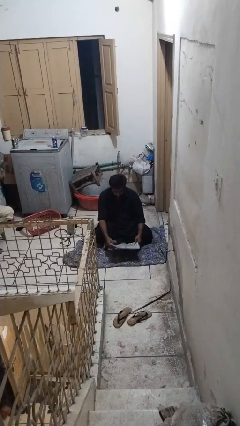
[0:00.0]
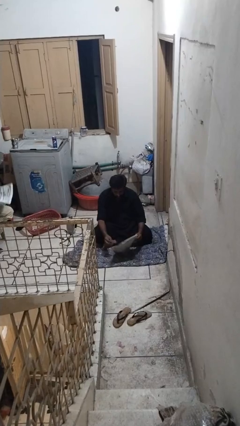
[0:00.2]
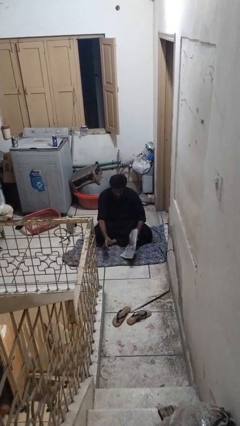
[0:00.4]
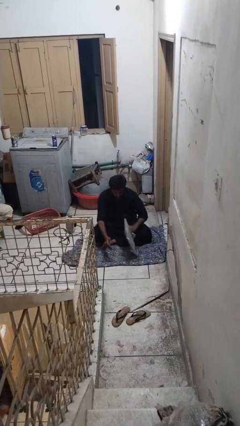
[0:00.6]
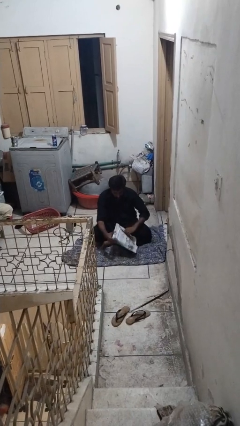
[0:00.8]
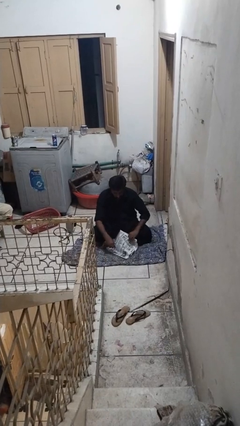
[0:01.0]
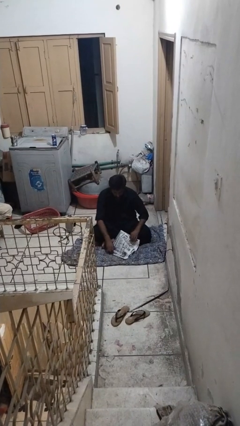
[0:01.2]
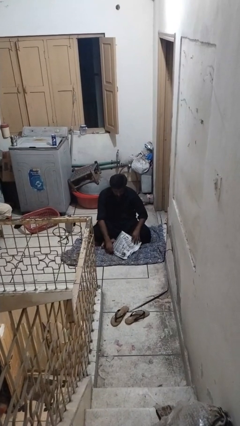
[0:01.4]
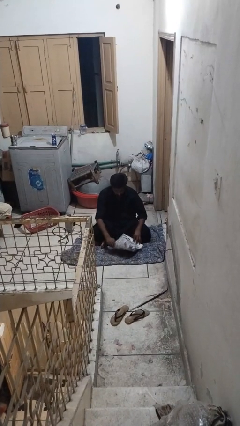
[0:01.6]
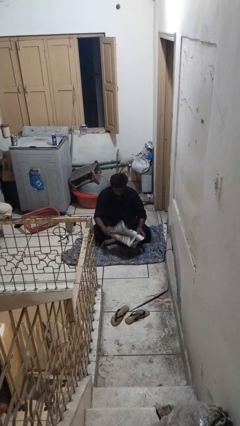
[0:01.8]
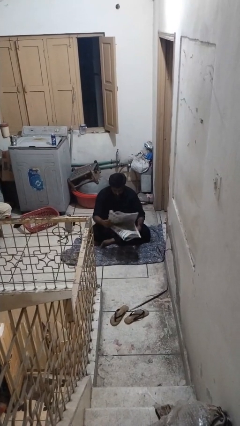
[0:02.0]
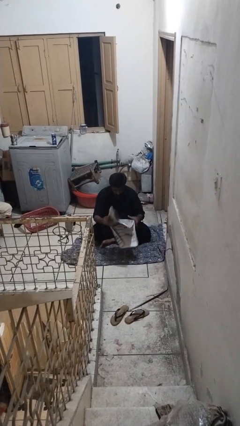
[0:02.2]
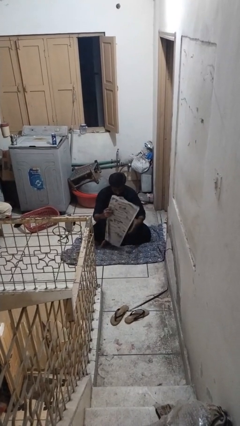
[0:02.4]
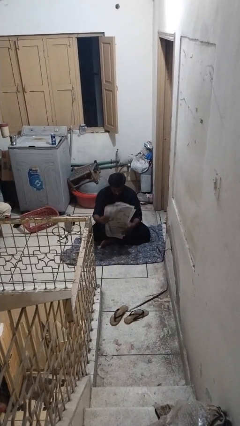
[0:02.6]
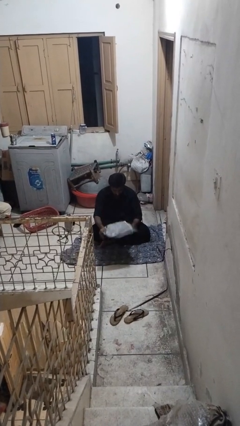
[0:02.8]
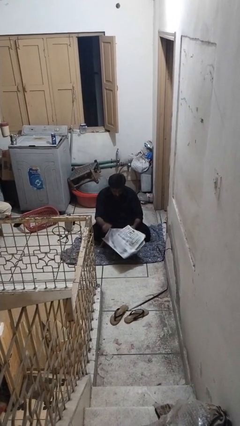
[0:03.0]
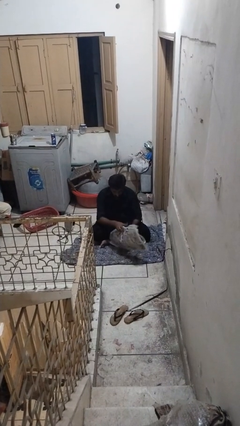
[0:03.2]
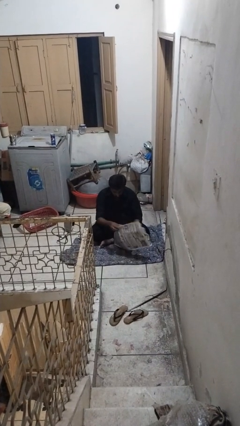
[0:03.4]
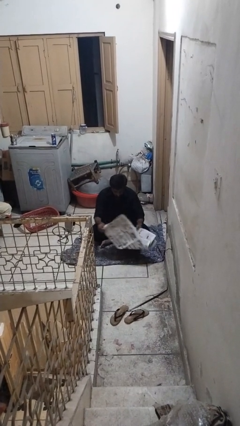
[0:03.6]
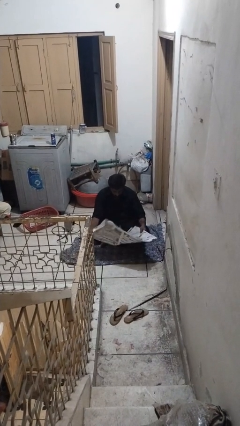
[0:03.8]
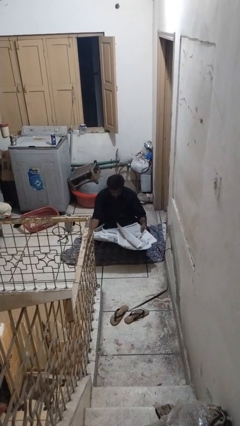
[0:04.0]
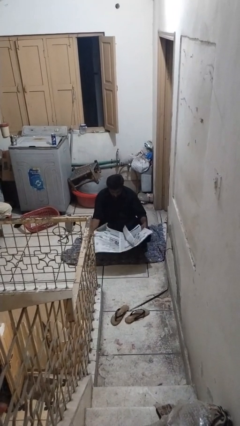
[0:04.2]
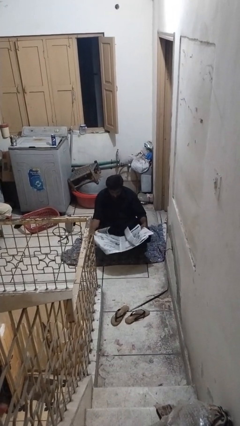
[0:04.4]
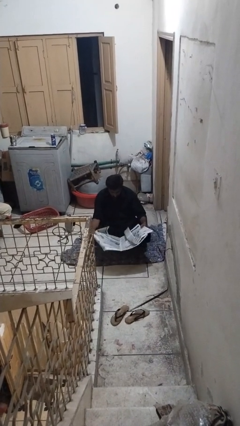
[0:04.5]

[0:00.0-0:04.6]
person reads newspaper

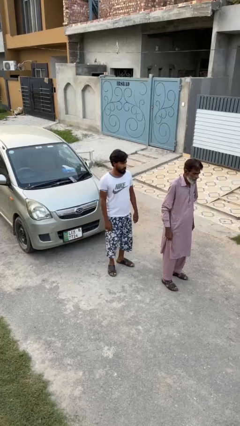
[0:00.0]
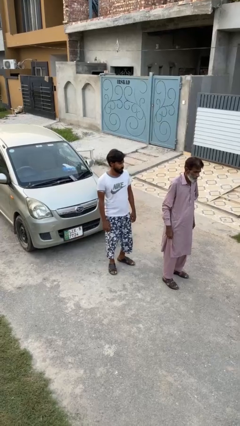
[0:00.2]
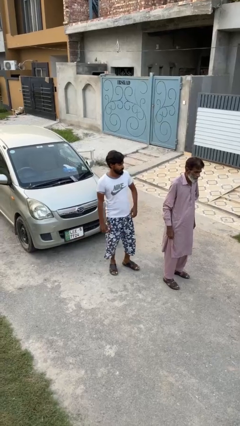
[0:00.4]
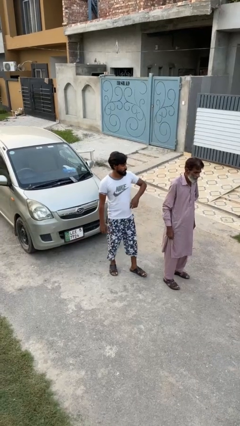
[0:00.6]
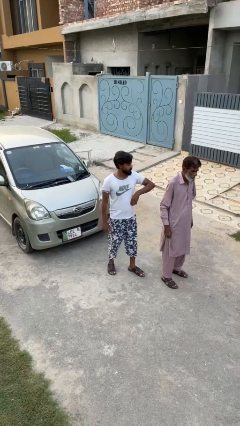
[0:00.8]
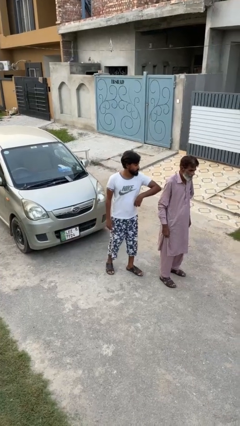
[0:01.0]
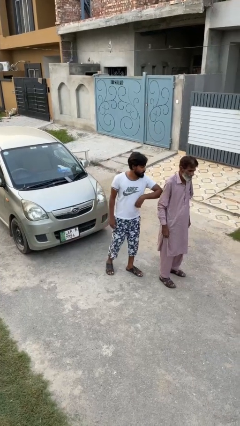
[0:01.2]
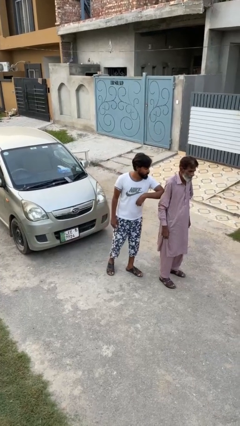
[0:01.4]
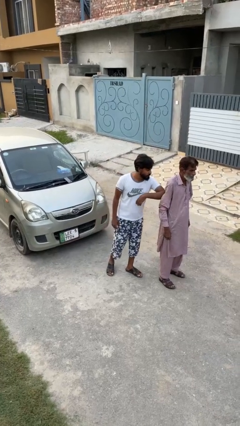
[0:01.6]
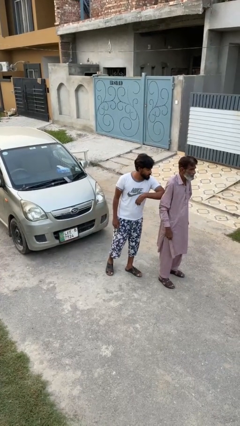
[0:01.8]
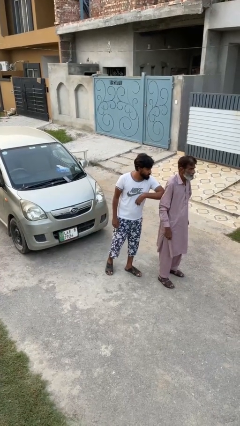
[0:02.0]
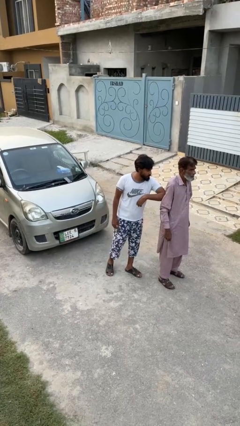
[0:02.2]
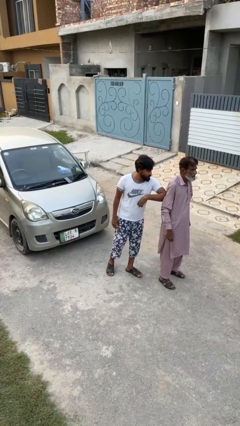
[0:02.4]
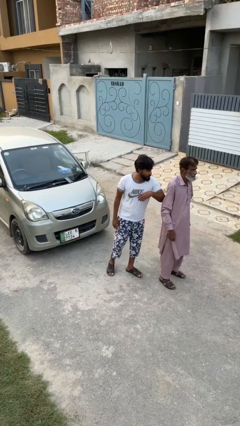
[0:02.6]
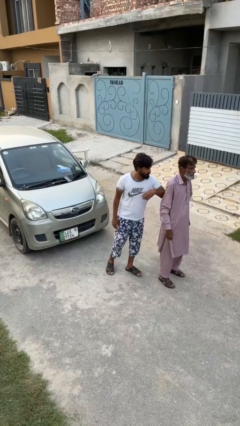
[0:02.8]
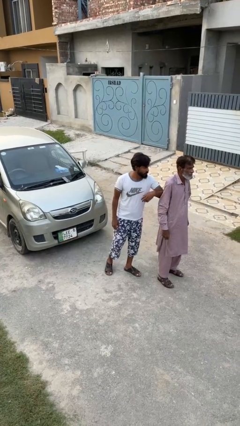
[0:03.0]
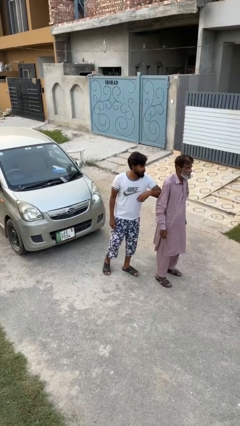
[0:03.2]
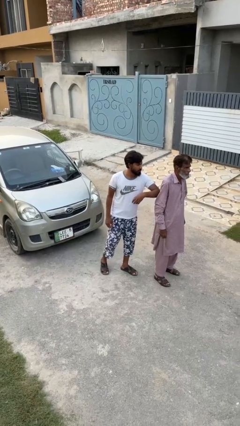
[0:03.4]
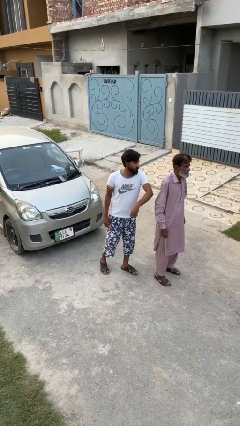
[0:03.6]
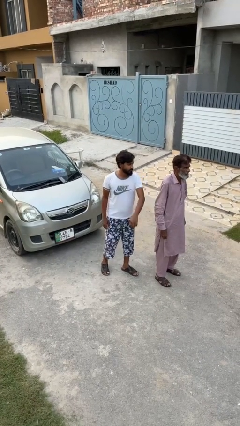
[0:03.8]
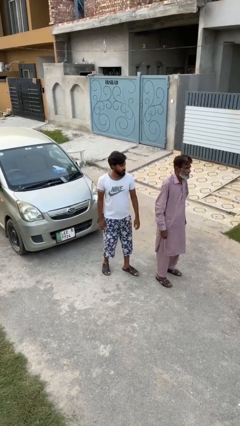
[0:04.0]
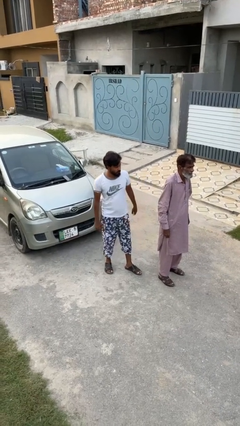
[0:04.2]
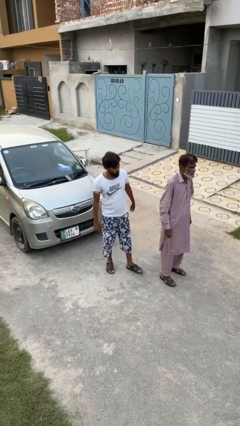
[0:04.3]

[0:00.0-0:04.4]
person nudges person with elbow

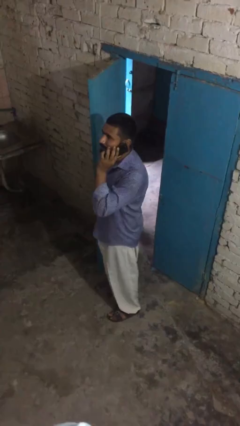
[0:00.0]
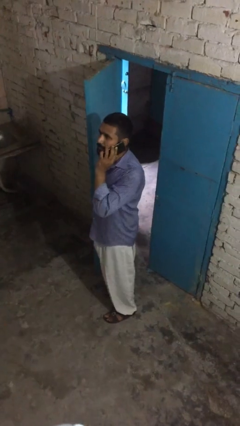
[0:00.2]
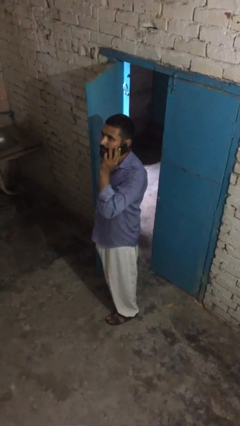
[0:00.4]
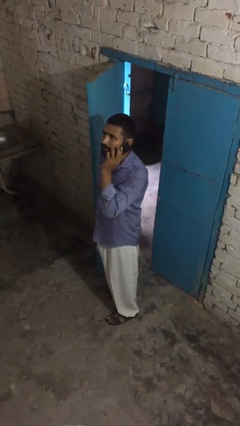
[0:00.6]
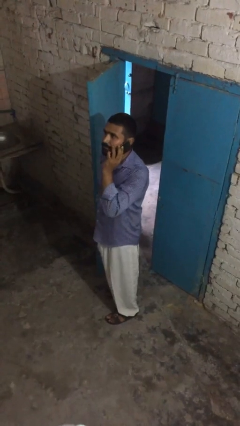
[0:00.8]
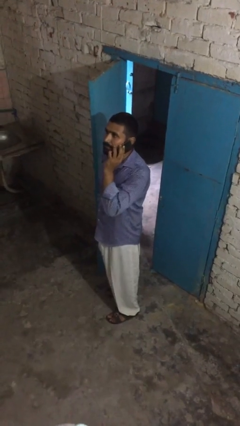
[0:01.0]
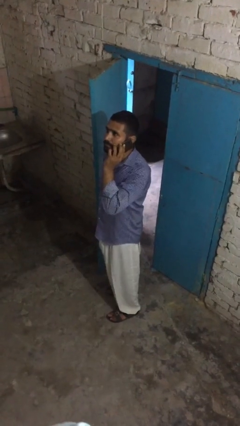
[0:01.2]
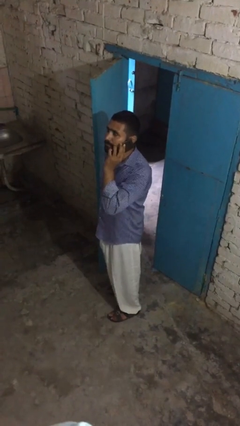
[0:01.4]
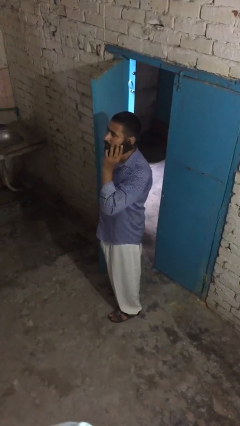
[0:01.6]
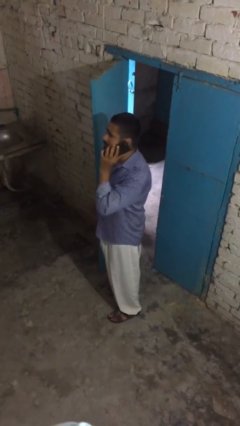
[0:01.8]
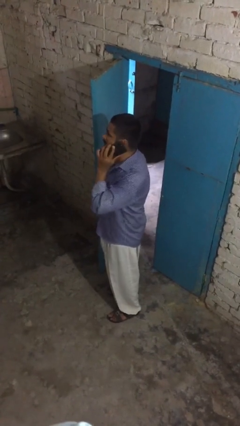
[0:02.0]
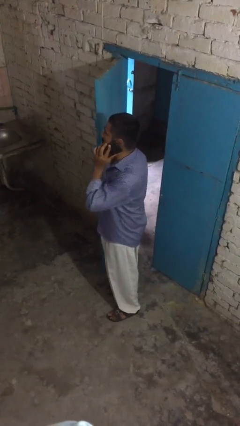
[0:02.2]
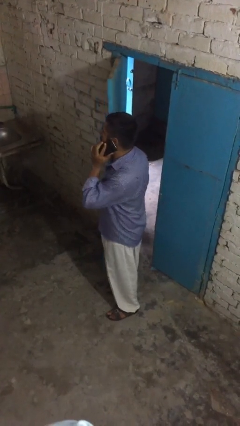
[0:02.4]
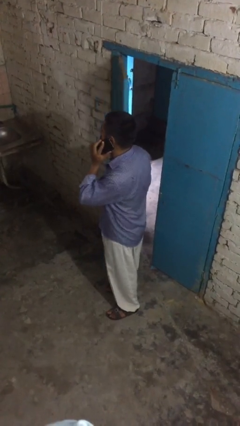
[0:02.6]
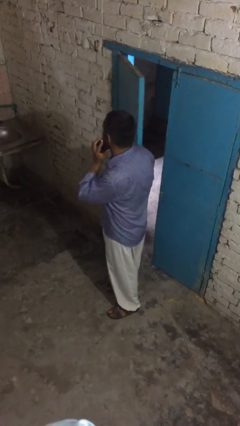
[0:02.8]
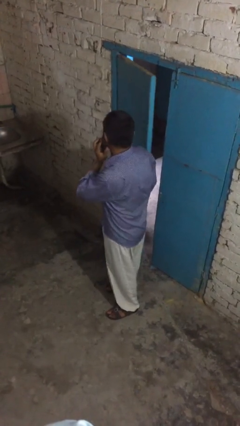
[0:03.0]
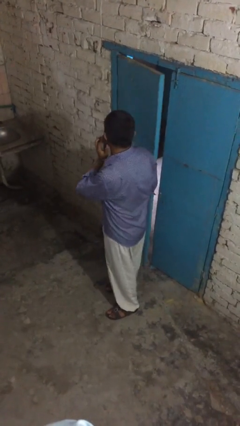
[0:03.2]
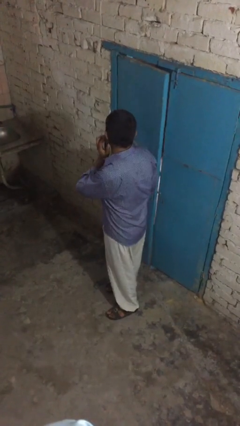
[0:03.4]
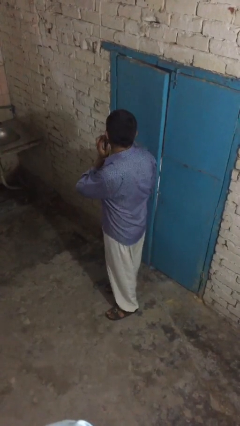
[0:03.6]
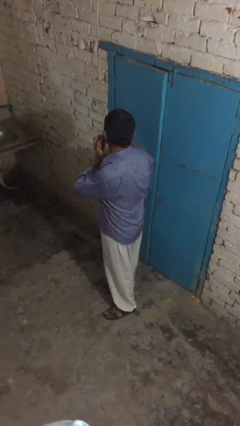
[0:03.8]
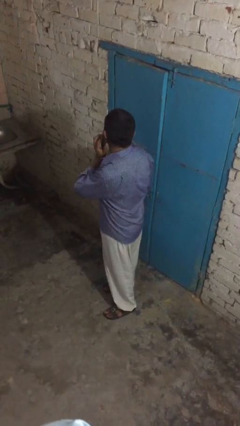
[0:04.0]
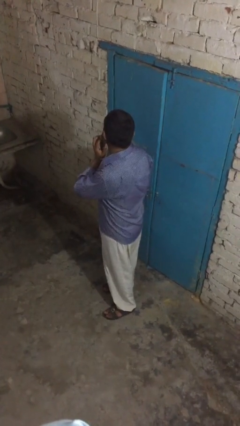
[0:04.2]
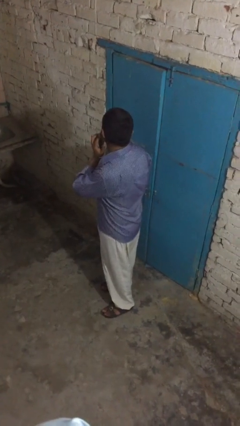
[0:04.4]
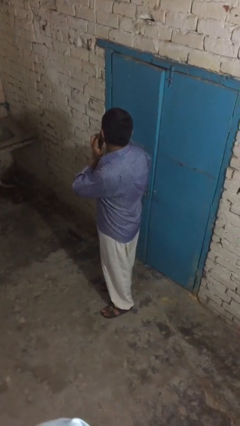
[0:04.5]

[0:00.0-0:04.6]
person closes facility door

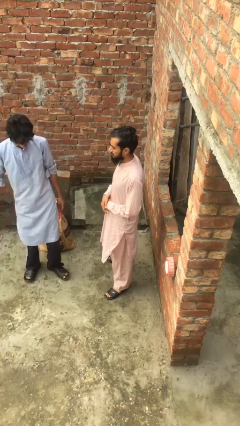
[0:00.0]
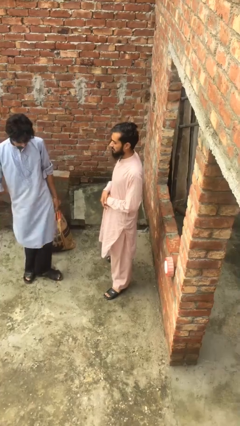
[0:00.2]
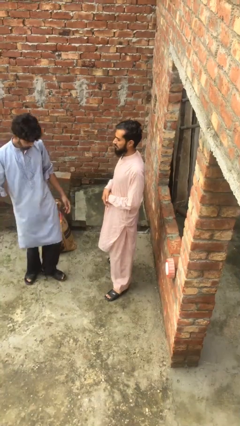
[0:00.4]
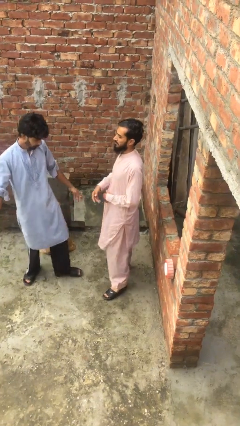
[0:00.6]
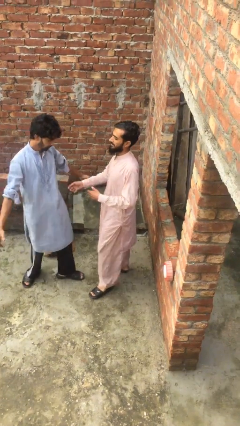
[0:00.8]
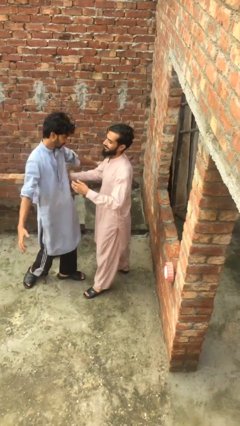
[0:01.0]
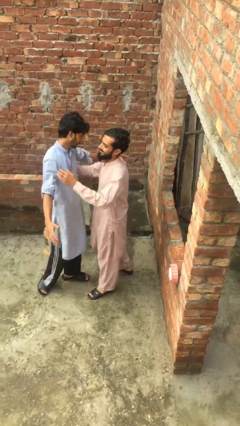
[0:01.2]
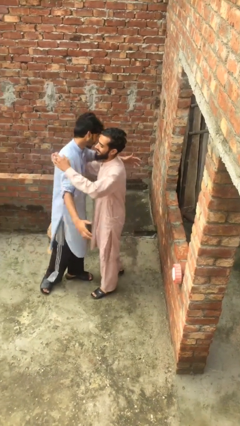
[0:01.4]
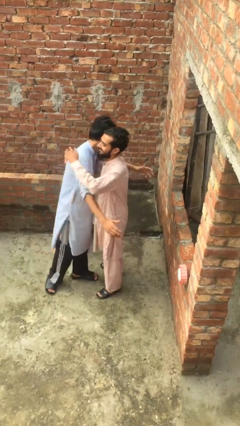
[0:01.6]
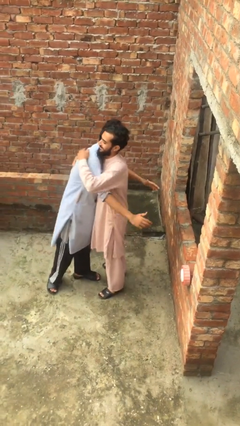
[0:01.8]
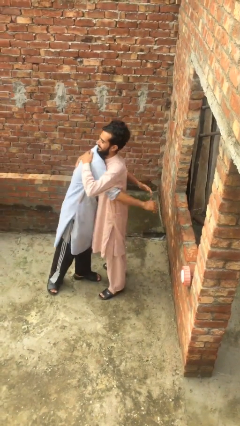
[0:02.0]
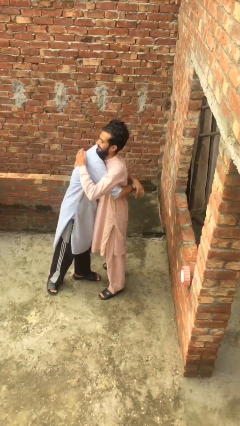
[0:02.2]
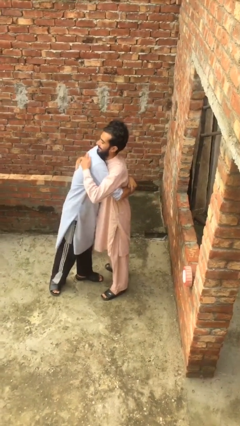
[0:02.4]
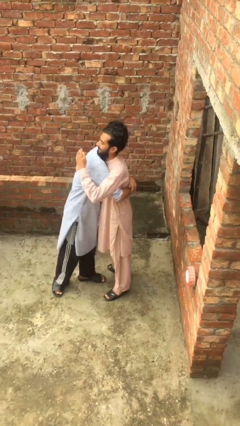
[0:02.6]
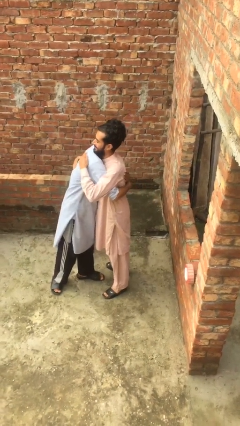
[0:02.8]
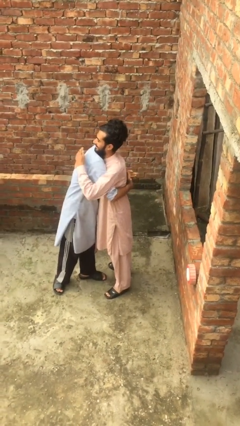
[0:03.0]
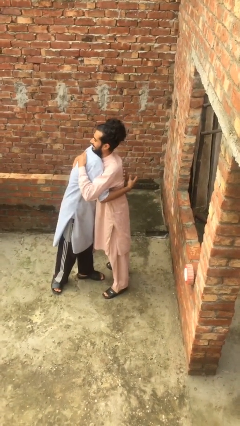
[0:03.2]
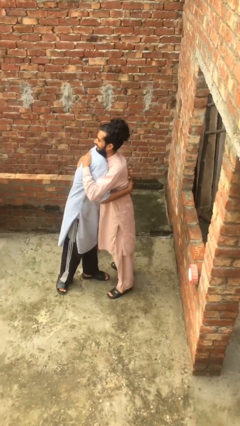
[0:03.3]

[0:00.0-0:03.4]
person embraces person

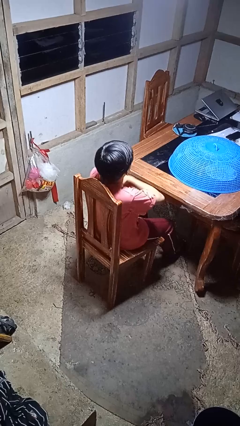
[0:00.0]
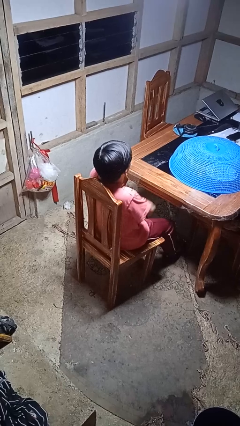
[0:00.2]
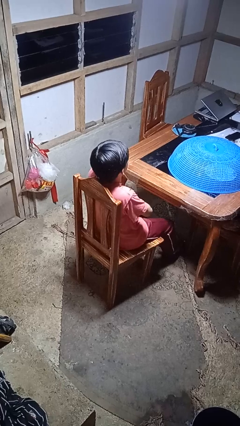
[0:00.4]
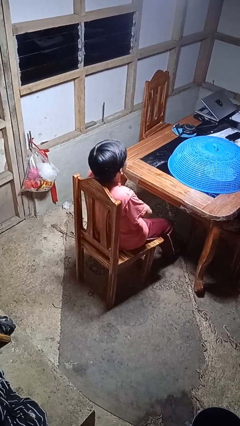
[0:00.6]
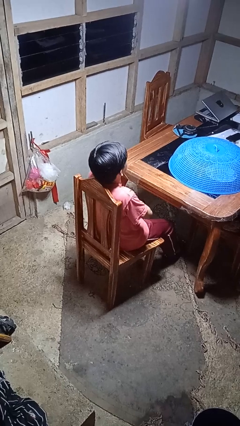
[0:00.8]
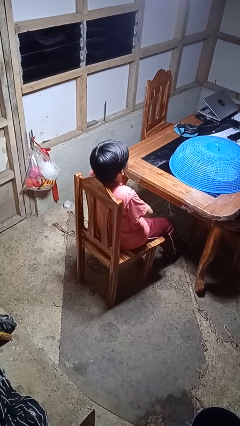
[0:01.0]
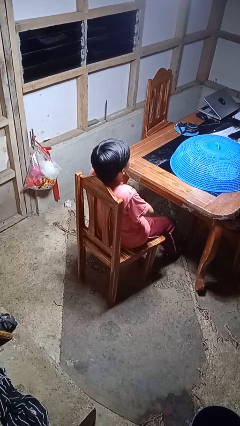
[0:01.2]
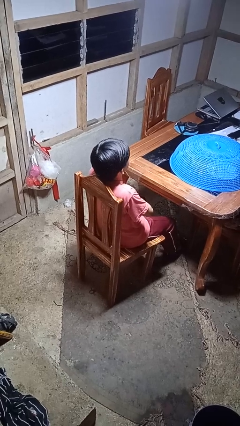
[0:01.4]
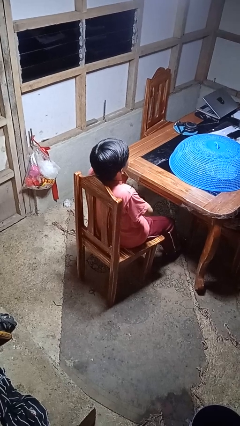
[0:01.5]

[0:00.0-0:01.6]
person crosses arms
